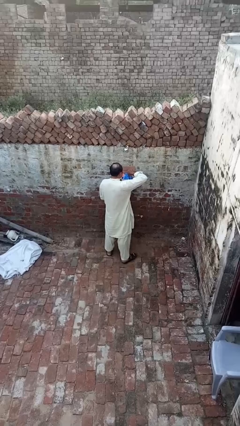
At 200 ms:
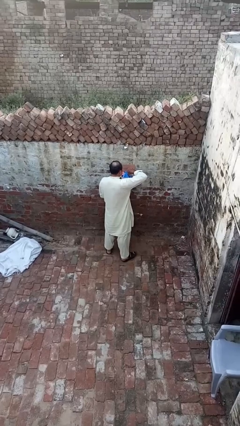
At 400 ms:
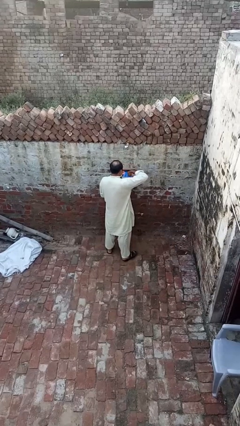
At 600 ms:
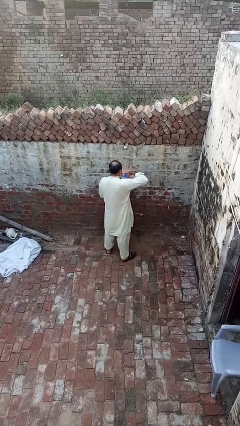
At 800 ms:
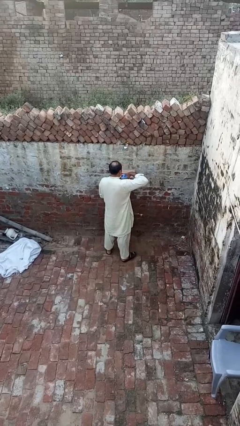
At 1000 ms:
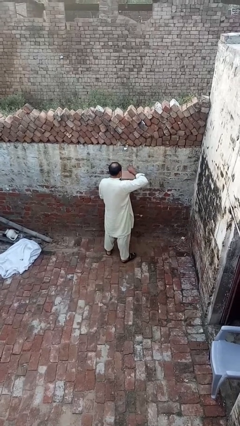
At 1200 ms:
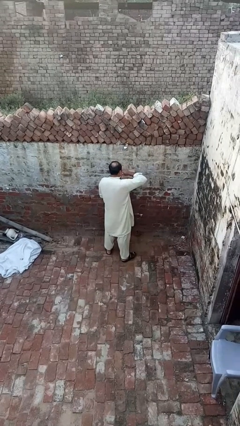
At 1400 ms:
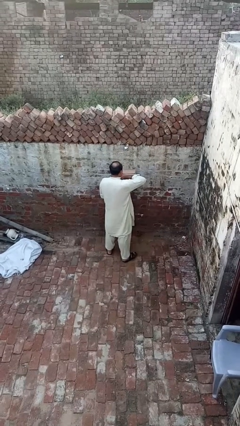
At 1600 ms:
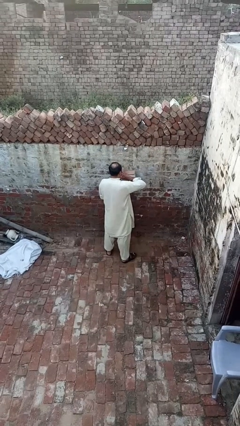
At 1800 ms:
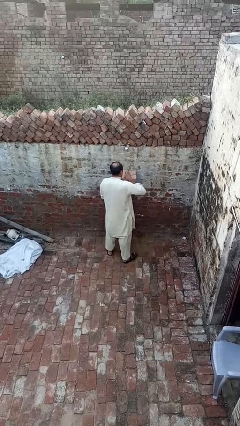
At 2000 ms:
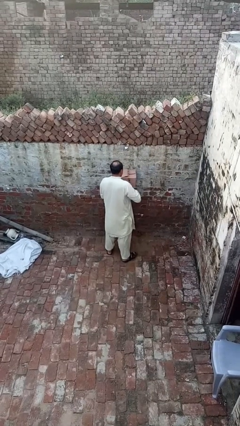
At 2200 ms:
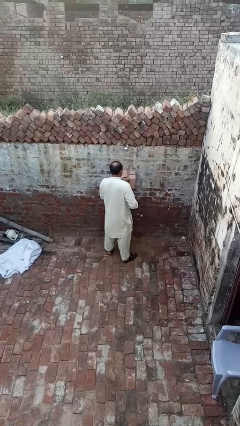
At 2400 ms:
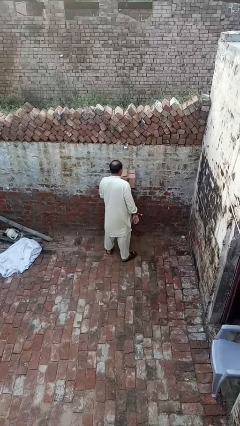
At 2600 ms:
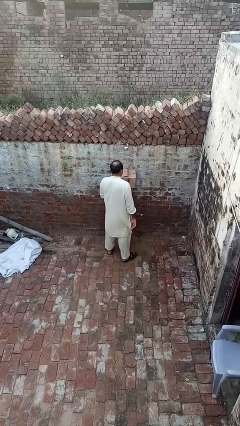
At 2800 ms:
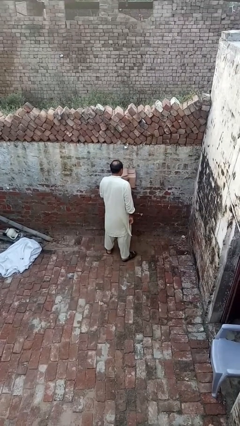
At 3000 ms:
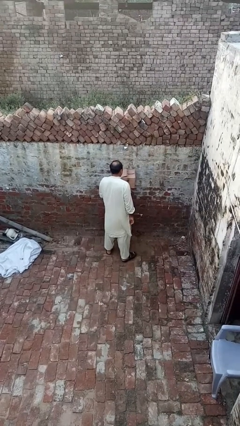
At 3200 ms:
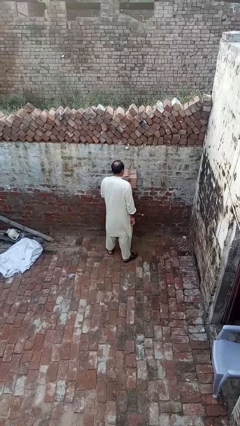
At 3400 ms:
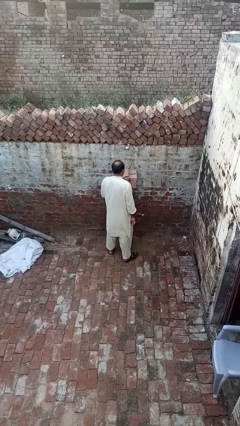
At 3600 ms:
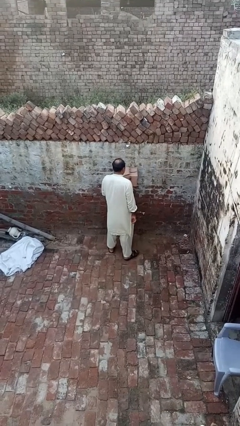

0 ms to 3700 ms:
person closes mailbox

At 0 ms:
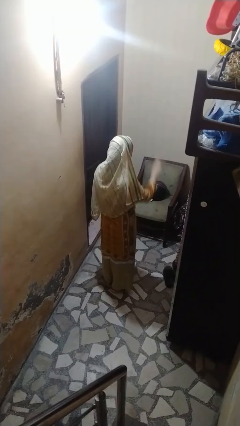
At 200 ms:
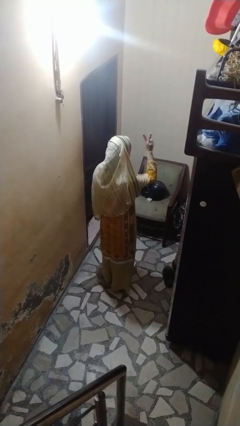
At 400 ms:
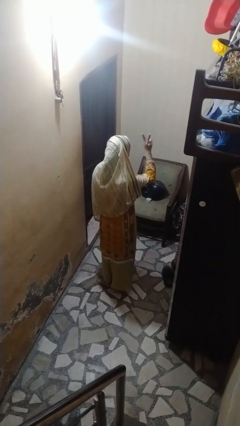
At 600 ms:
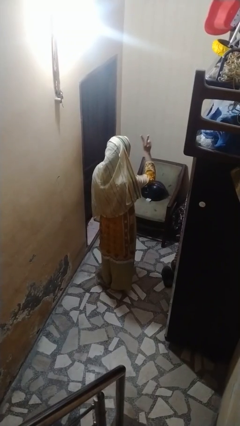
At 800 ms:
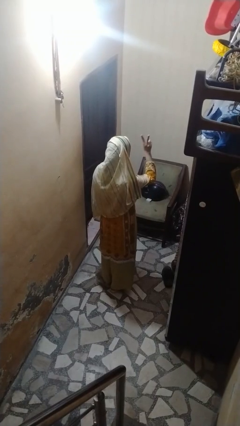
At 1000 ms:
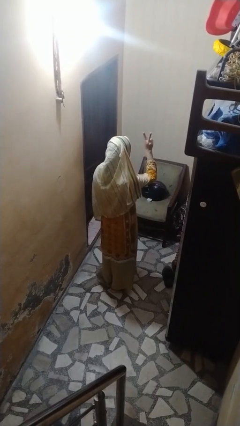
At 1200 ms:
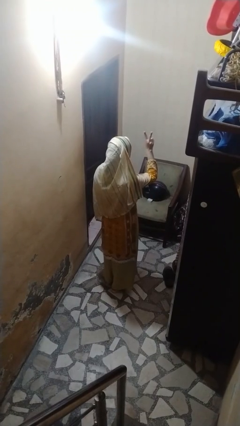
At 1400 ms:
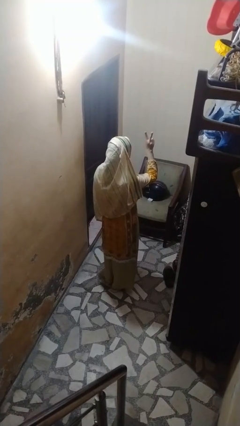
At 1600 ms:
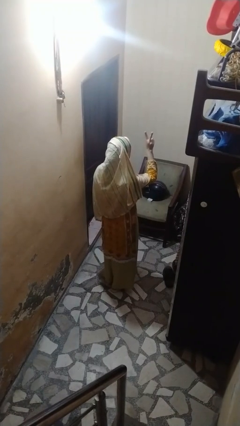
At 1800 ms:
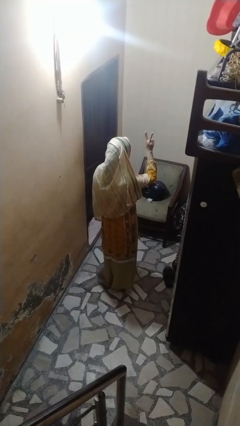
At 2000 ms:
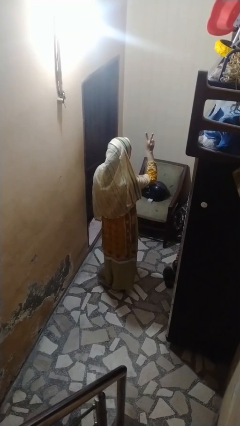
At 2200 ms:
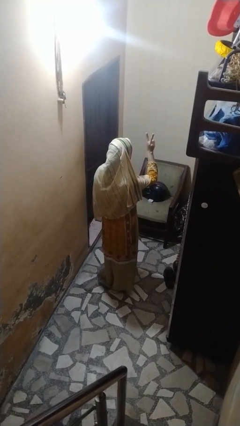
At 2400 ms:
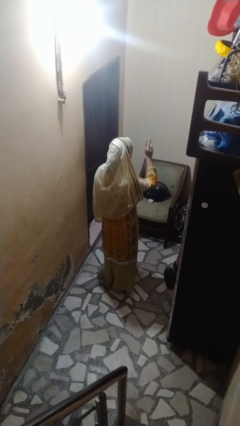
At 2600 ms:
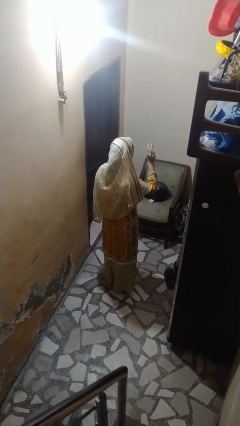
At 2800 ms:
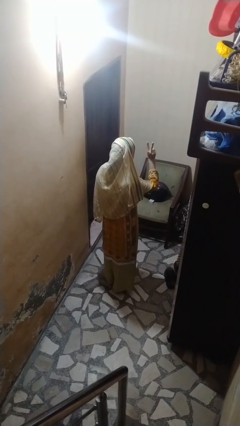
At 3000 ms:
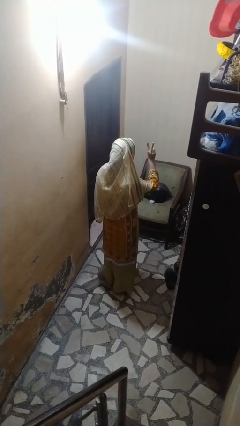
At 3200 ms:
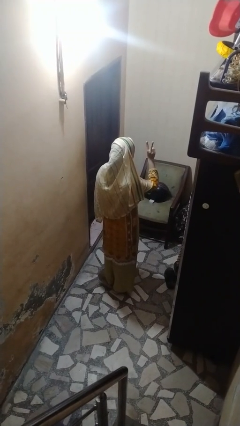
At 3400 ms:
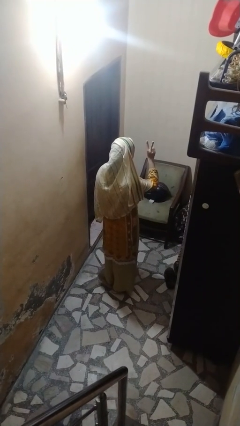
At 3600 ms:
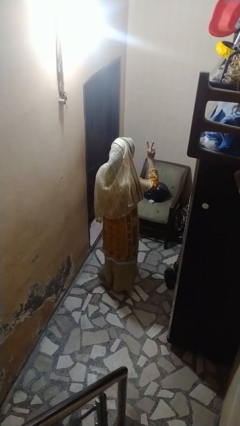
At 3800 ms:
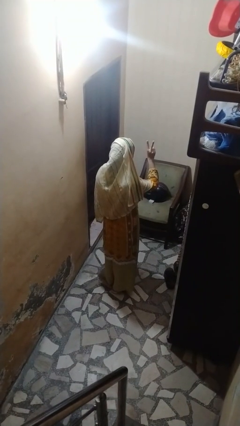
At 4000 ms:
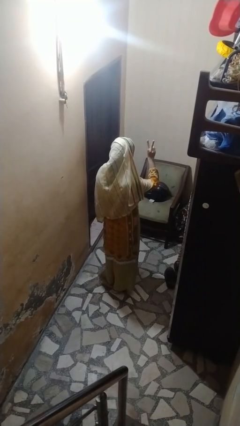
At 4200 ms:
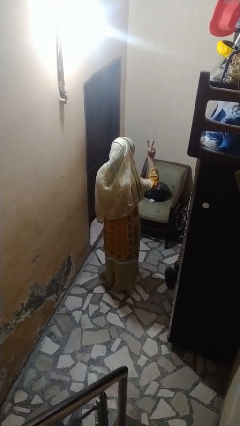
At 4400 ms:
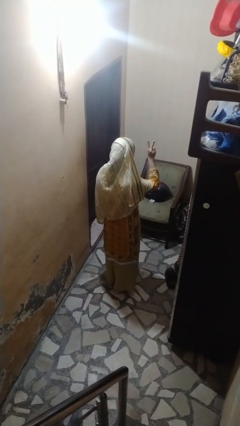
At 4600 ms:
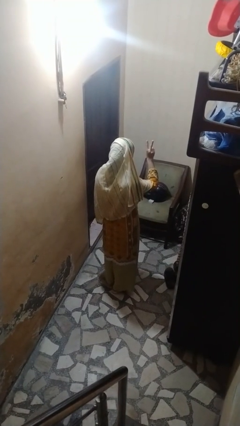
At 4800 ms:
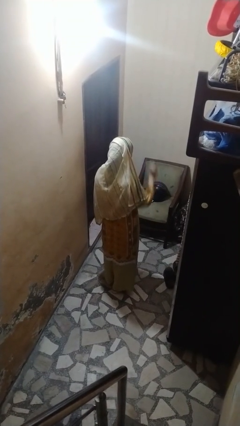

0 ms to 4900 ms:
person gestures peace

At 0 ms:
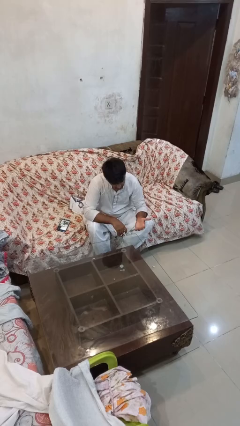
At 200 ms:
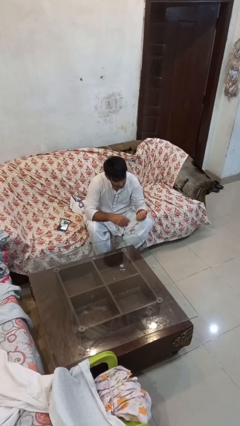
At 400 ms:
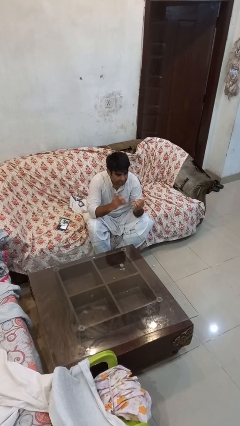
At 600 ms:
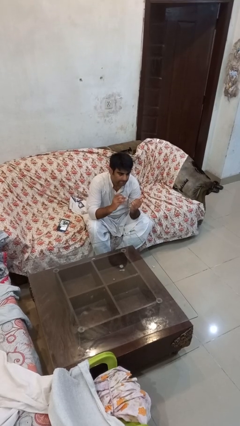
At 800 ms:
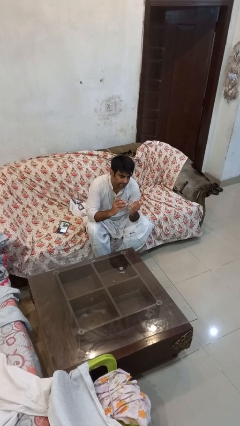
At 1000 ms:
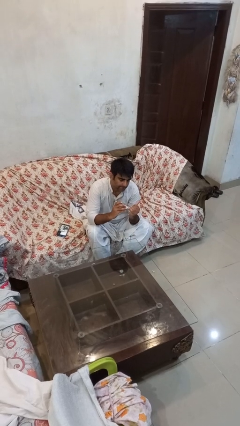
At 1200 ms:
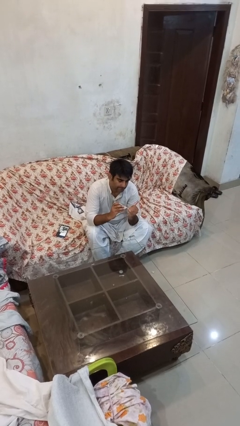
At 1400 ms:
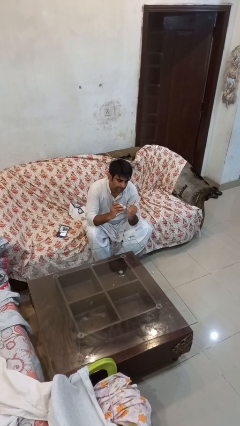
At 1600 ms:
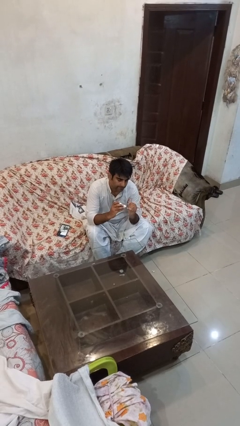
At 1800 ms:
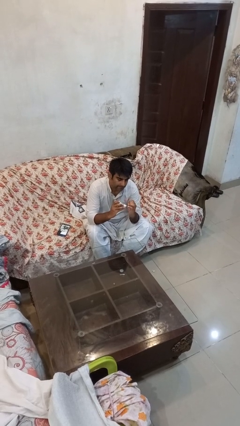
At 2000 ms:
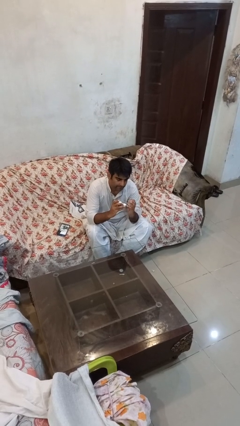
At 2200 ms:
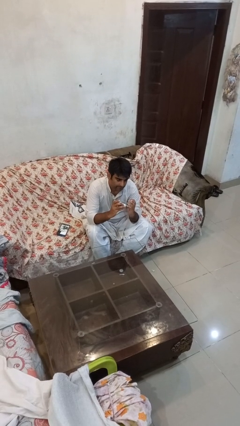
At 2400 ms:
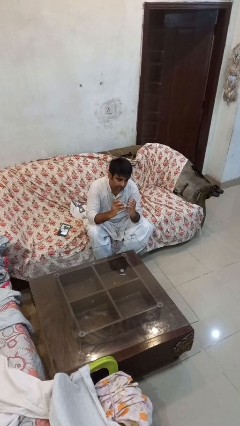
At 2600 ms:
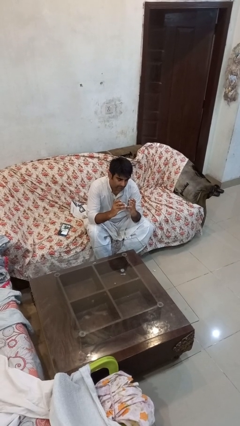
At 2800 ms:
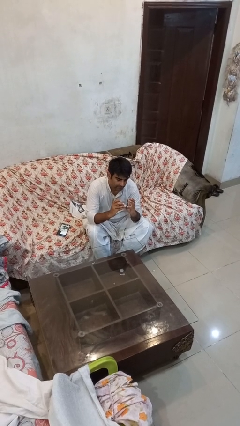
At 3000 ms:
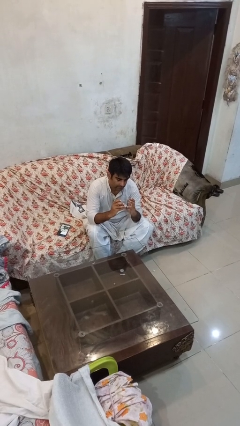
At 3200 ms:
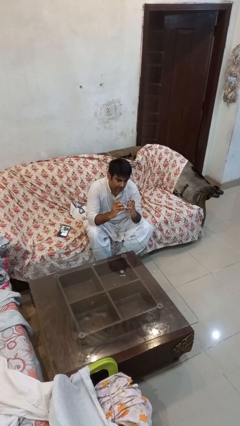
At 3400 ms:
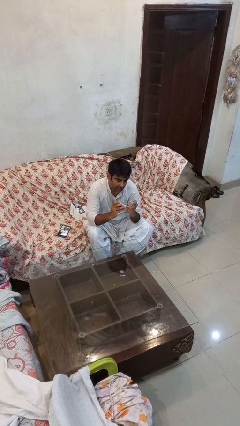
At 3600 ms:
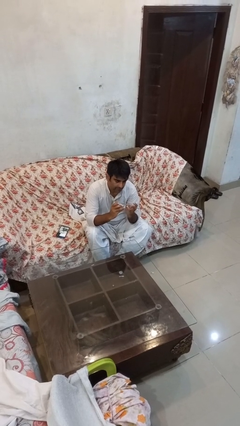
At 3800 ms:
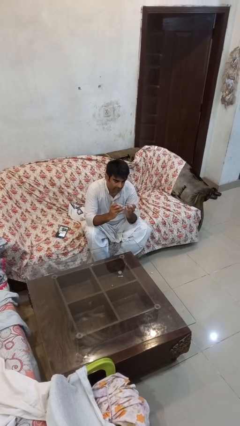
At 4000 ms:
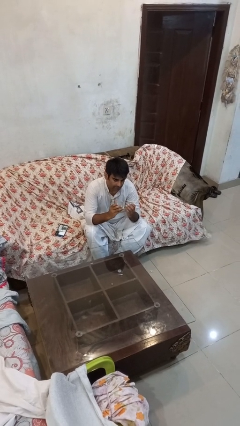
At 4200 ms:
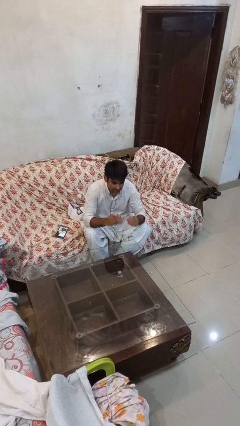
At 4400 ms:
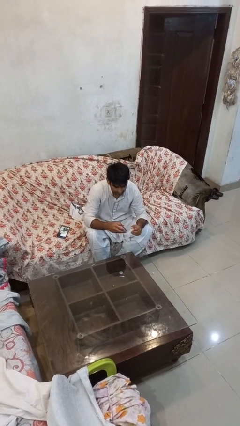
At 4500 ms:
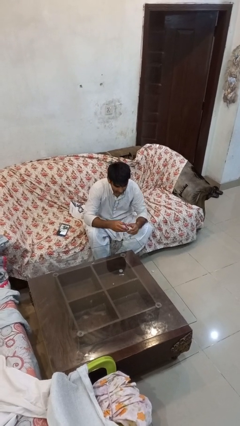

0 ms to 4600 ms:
person clips fingernails

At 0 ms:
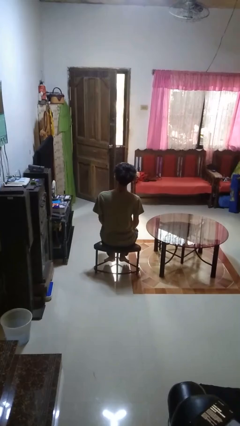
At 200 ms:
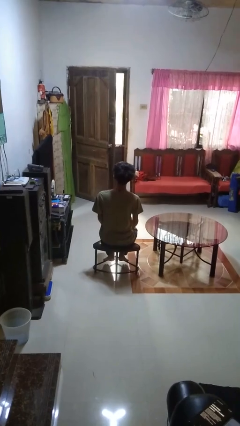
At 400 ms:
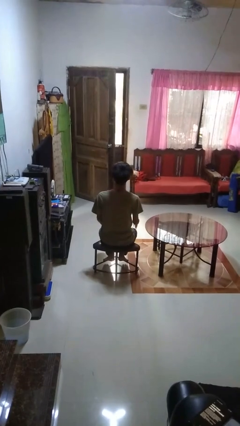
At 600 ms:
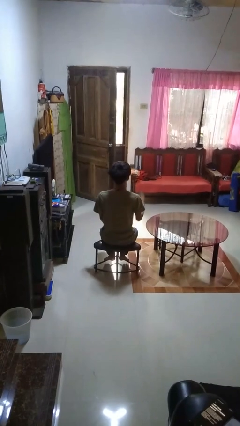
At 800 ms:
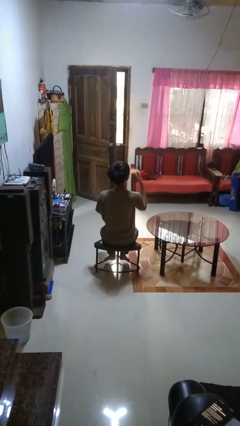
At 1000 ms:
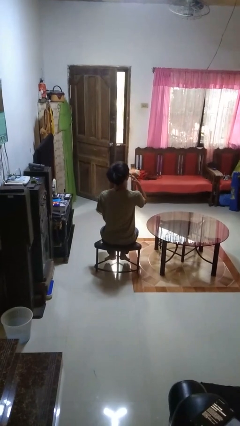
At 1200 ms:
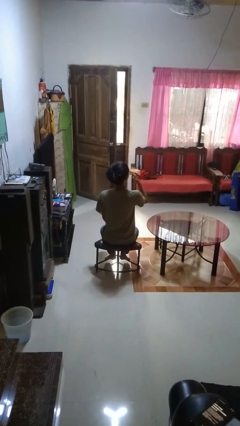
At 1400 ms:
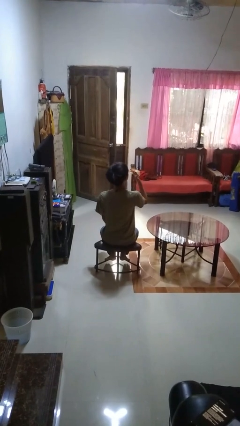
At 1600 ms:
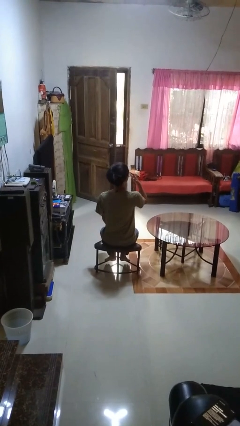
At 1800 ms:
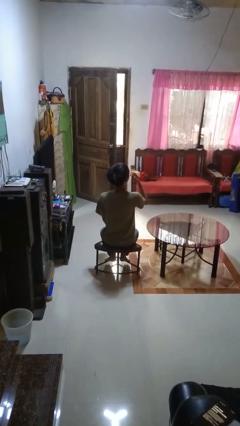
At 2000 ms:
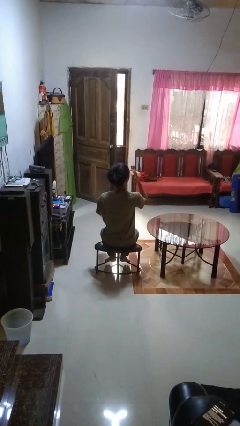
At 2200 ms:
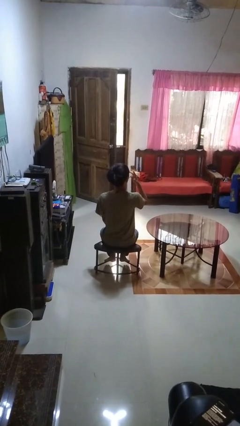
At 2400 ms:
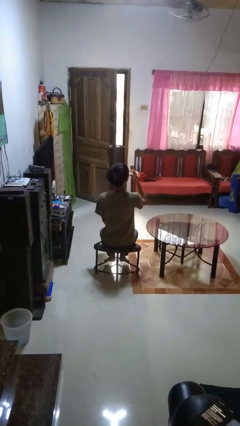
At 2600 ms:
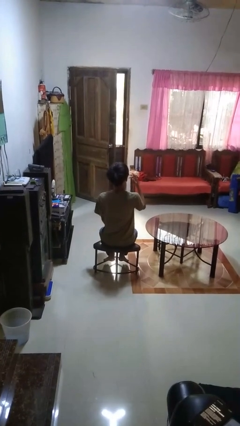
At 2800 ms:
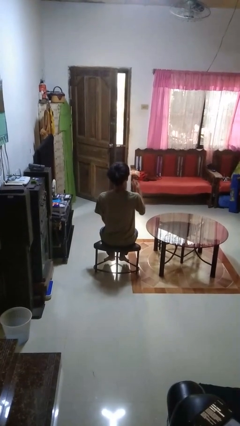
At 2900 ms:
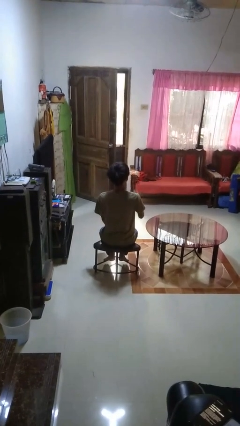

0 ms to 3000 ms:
person licks fingers

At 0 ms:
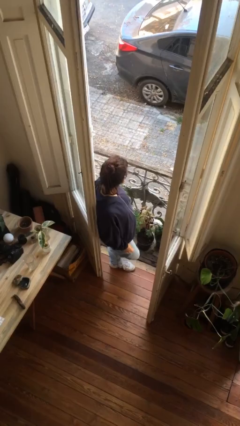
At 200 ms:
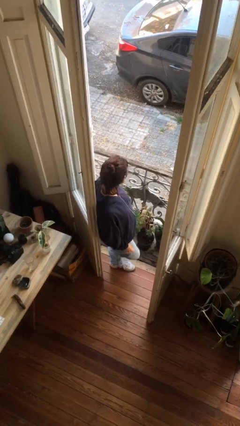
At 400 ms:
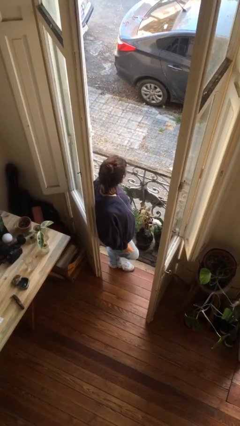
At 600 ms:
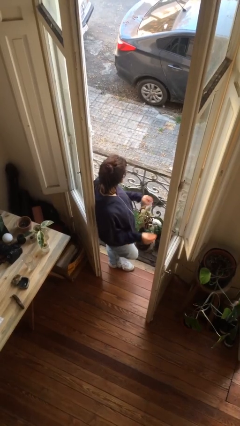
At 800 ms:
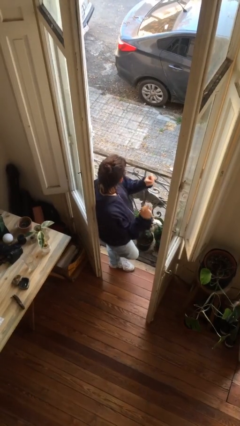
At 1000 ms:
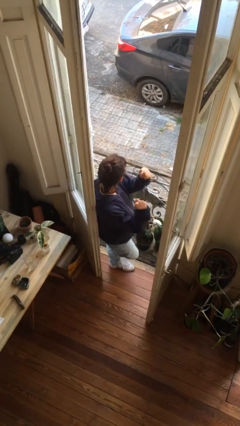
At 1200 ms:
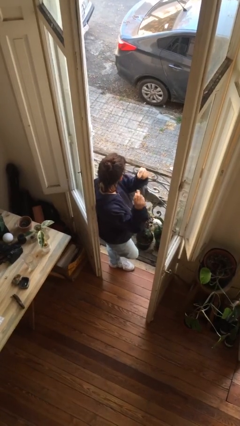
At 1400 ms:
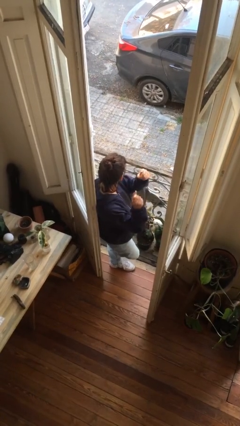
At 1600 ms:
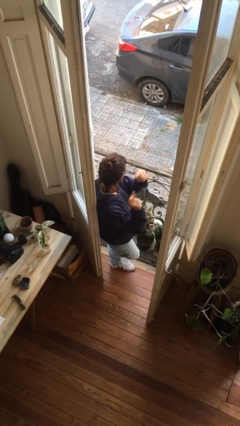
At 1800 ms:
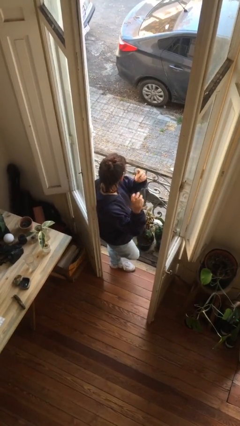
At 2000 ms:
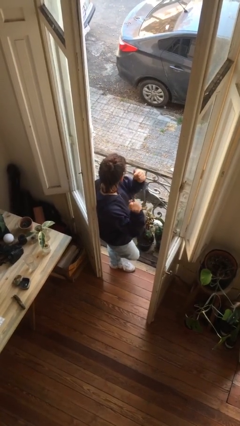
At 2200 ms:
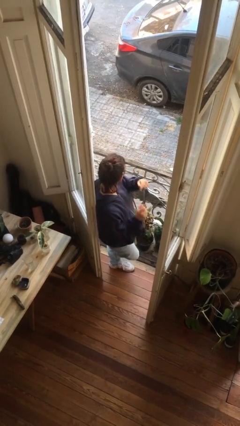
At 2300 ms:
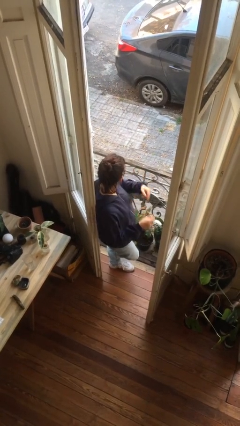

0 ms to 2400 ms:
person snaps fingers
